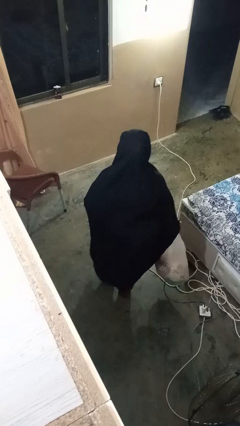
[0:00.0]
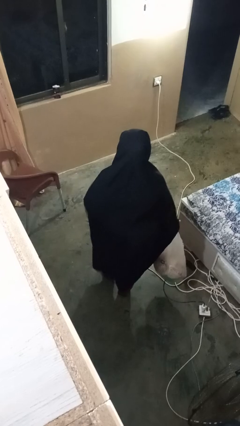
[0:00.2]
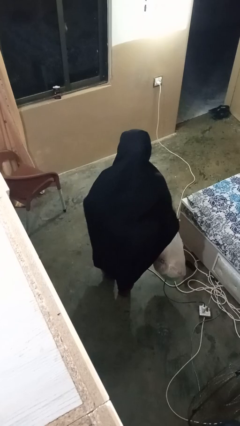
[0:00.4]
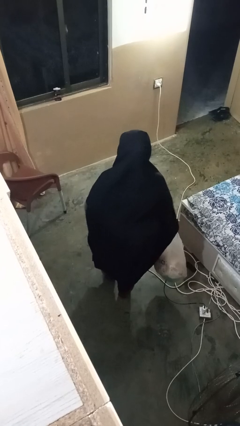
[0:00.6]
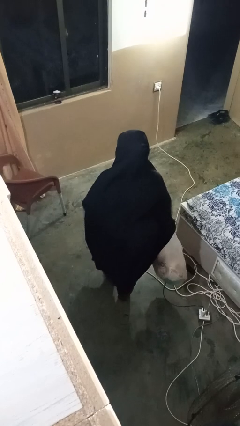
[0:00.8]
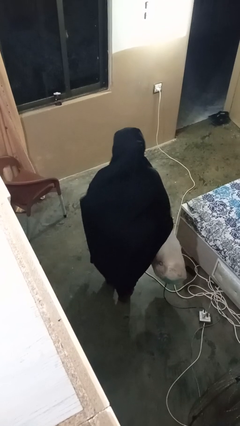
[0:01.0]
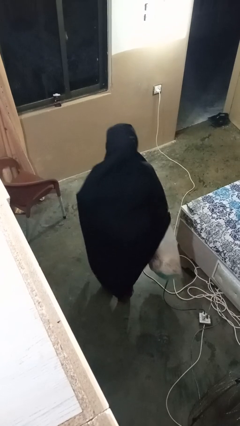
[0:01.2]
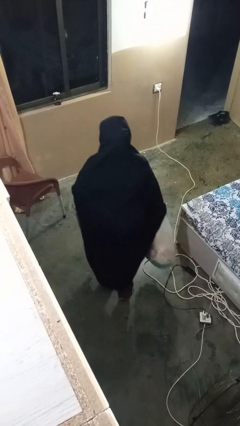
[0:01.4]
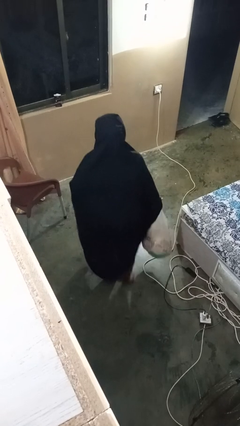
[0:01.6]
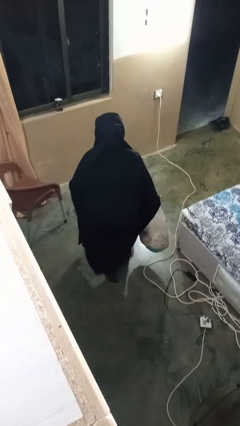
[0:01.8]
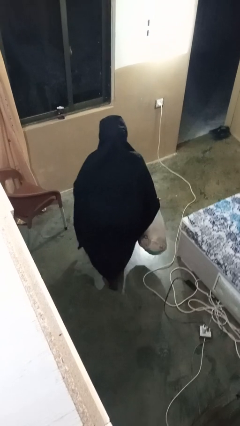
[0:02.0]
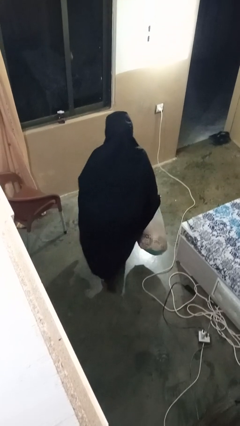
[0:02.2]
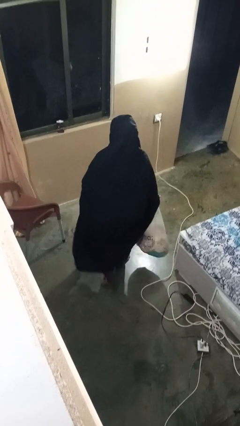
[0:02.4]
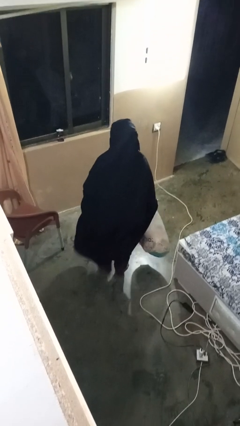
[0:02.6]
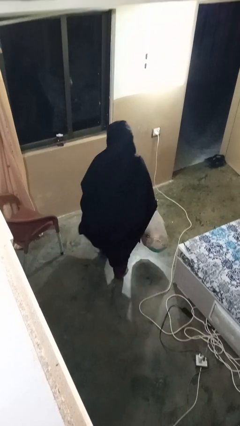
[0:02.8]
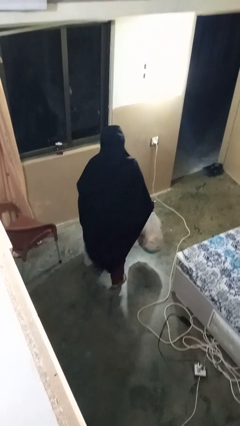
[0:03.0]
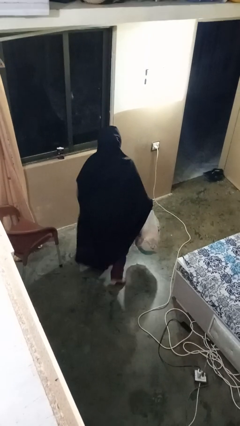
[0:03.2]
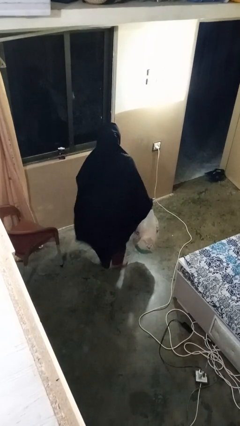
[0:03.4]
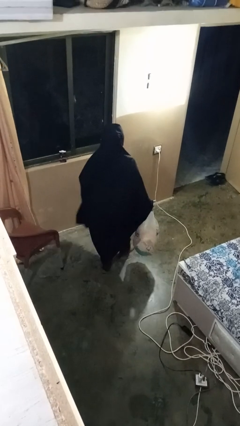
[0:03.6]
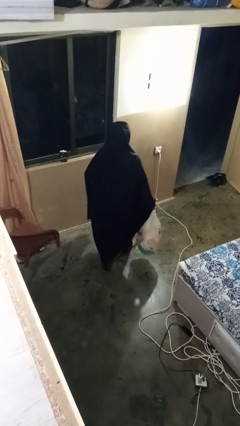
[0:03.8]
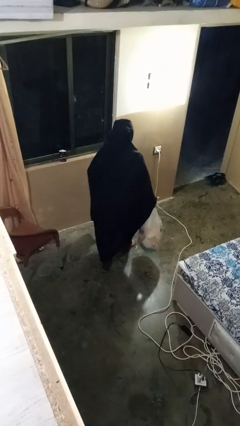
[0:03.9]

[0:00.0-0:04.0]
person carries groceries

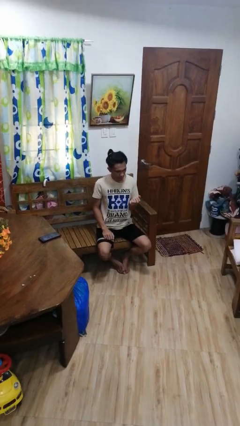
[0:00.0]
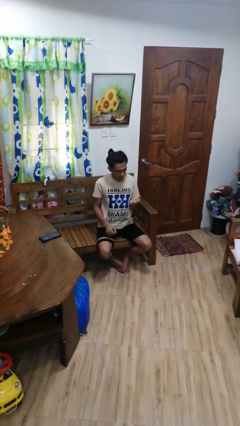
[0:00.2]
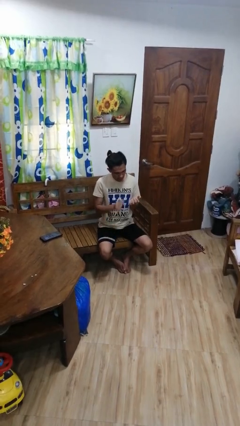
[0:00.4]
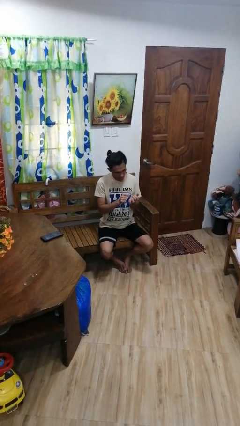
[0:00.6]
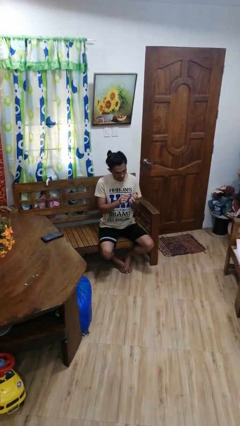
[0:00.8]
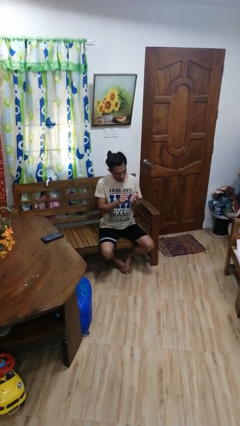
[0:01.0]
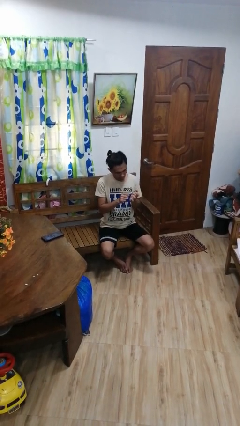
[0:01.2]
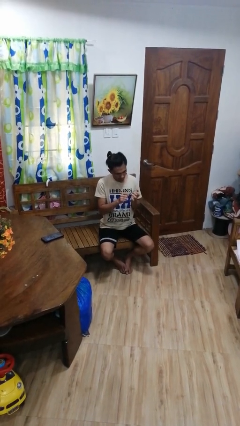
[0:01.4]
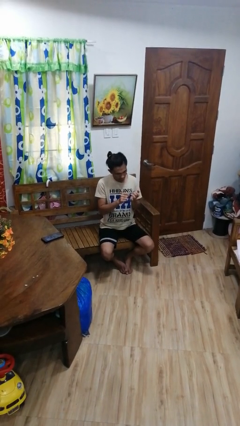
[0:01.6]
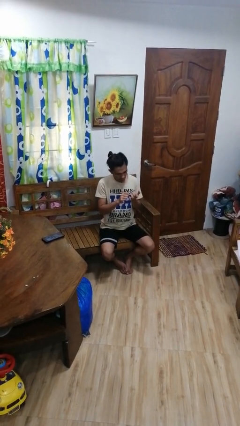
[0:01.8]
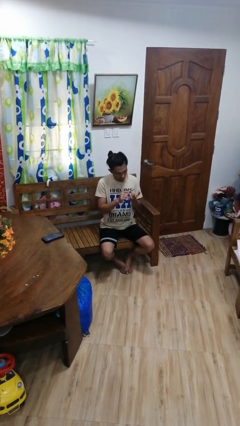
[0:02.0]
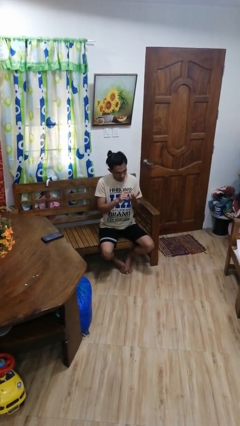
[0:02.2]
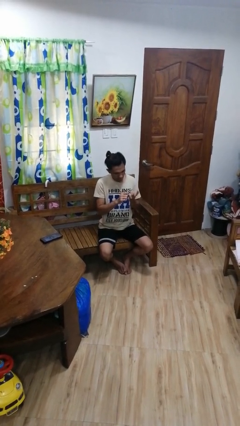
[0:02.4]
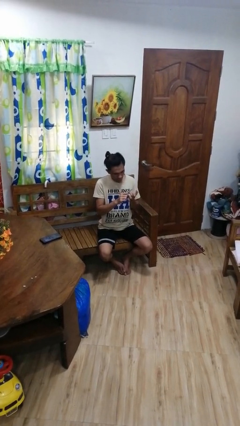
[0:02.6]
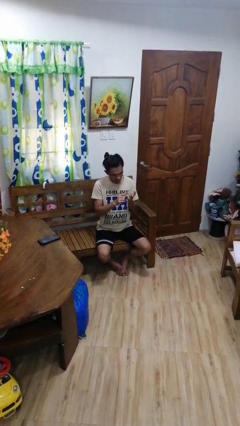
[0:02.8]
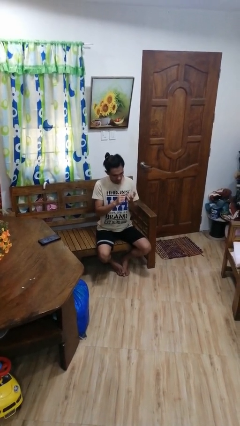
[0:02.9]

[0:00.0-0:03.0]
person files fingernails

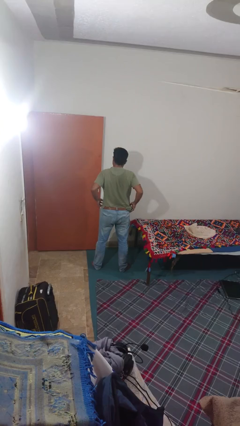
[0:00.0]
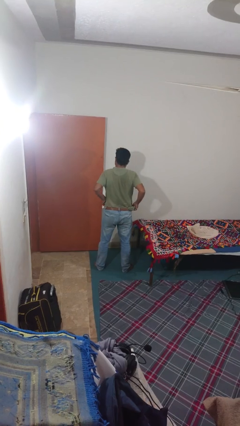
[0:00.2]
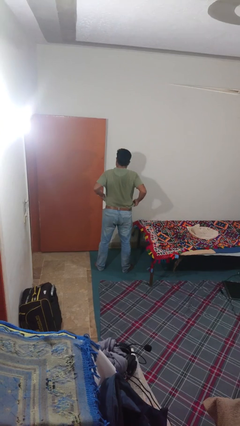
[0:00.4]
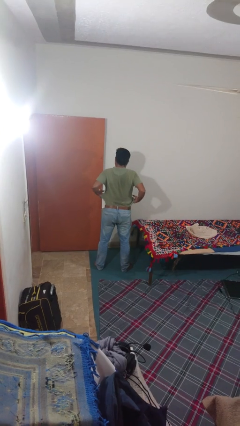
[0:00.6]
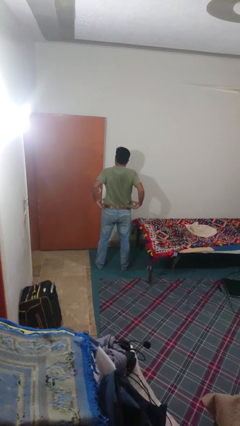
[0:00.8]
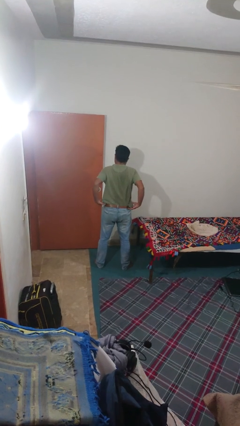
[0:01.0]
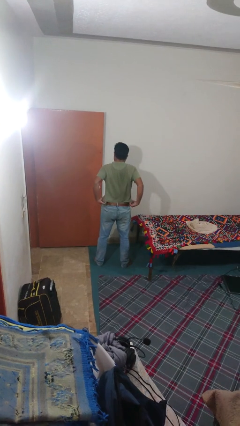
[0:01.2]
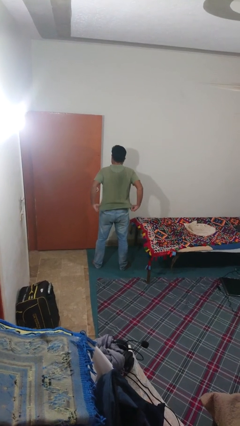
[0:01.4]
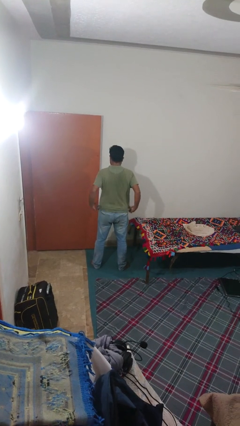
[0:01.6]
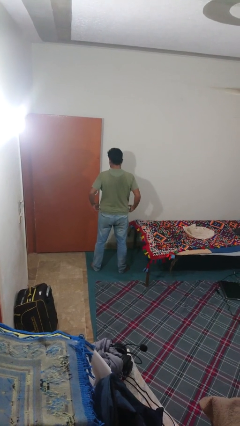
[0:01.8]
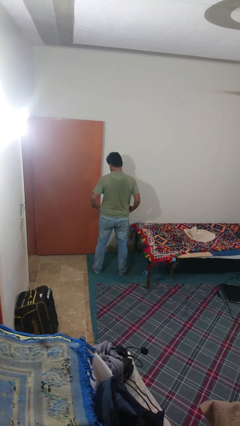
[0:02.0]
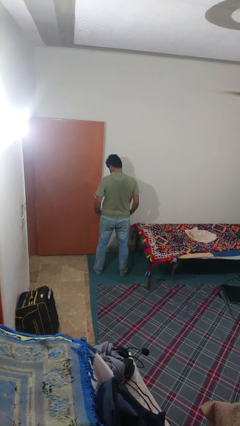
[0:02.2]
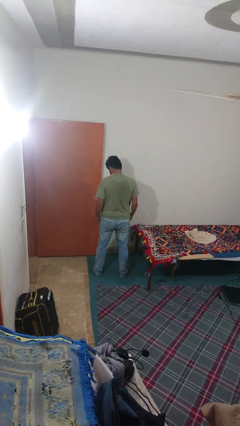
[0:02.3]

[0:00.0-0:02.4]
person untucks shirt

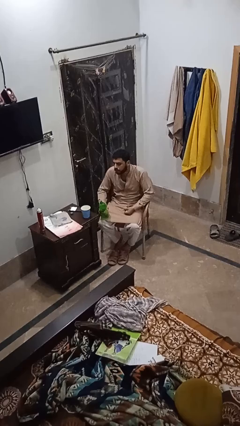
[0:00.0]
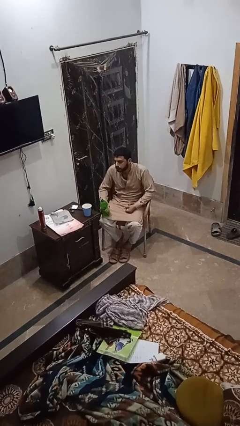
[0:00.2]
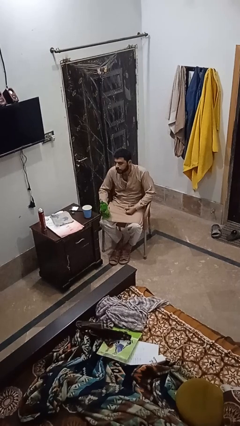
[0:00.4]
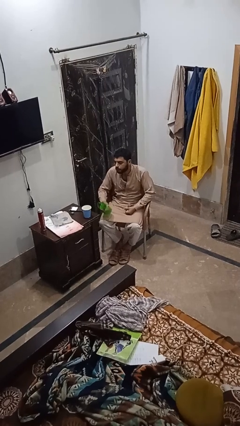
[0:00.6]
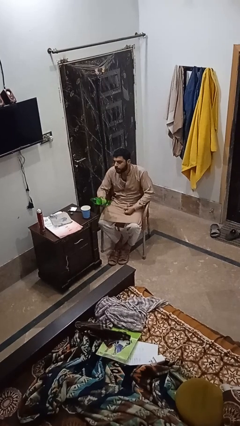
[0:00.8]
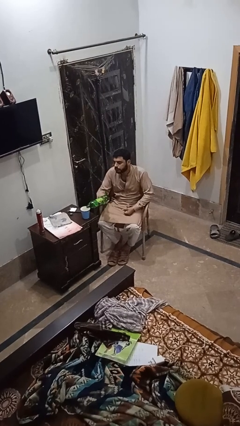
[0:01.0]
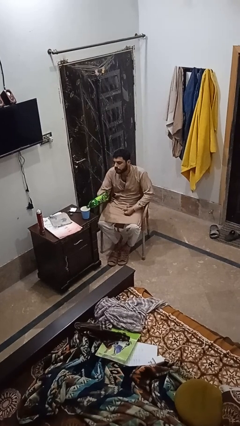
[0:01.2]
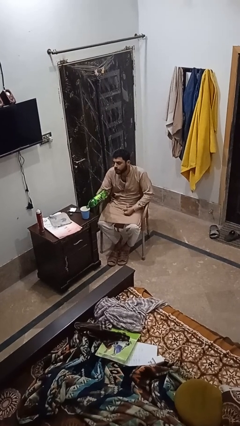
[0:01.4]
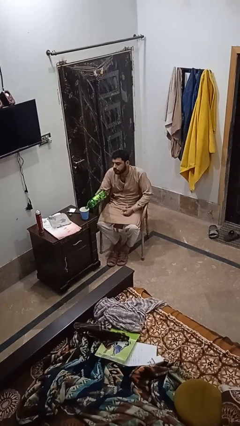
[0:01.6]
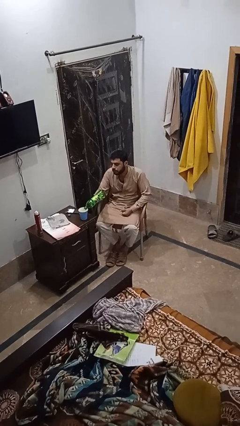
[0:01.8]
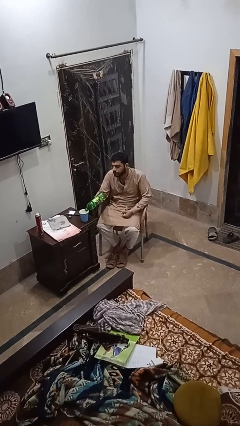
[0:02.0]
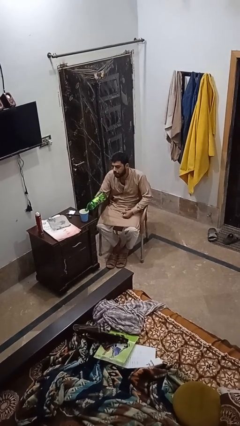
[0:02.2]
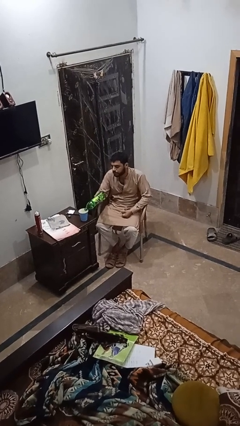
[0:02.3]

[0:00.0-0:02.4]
person pours liquid into cup

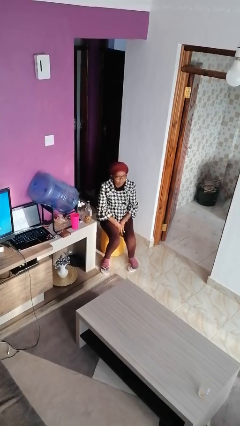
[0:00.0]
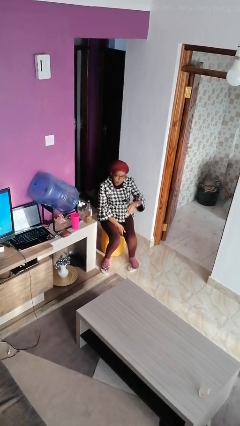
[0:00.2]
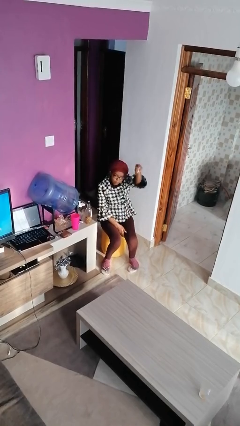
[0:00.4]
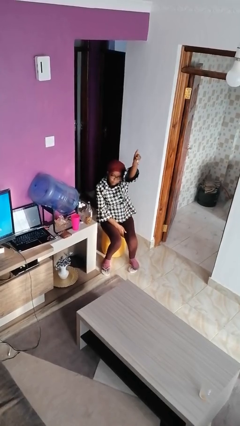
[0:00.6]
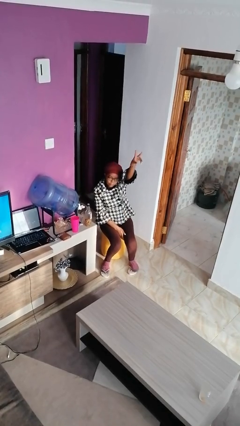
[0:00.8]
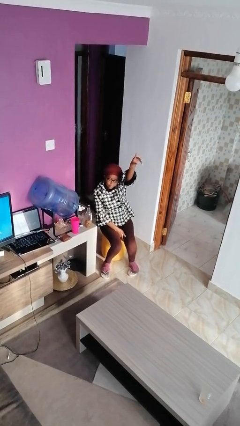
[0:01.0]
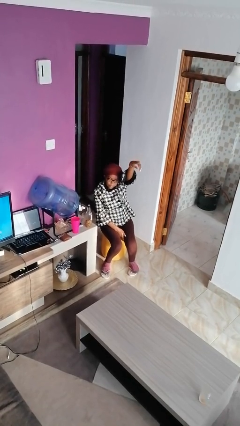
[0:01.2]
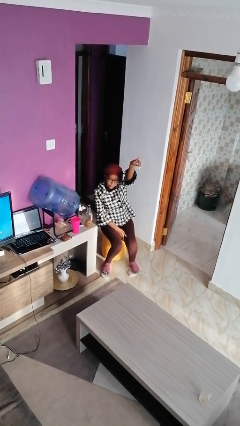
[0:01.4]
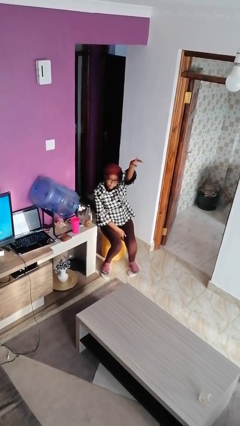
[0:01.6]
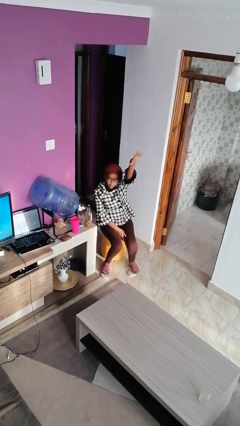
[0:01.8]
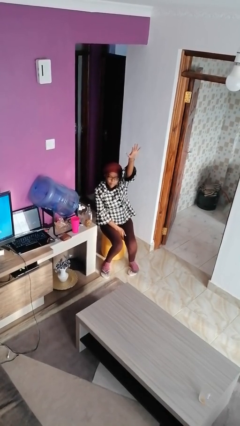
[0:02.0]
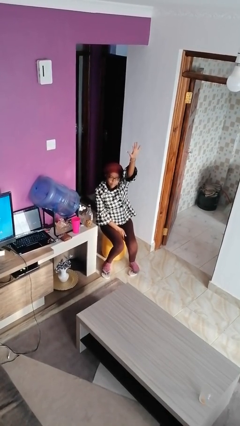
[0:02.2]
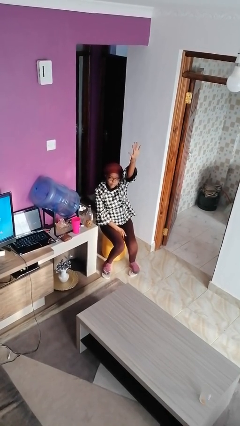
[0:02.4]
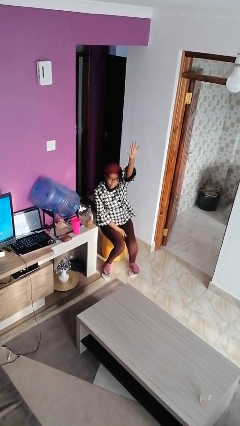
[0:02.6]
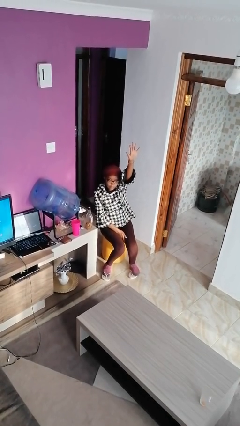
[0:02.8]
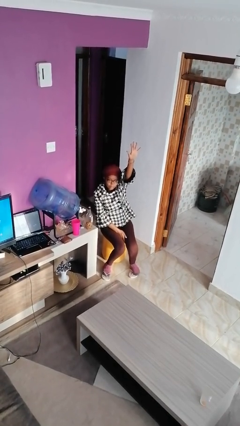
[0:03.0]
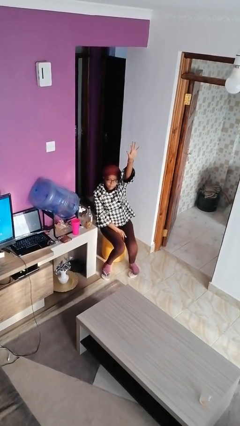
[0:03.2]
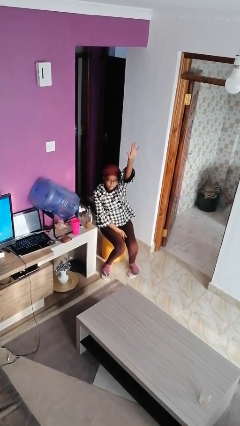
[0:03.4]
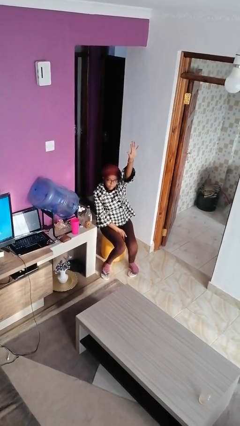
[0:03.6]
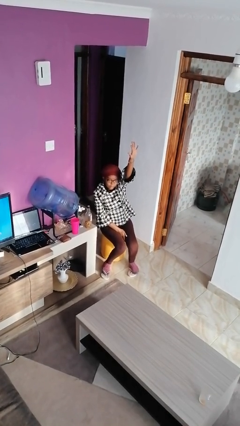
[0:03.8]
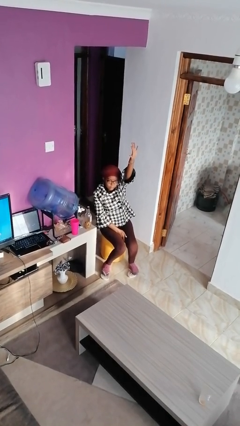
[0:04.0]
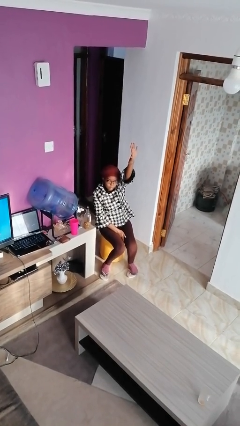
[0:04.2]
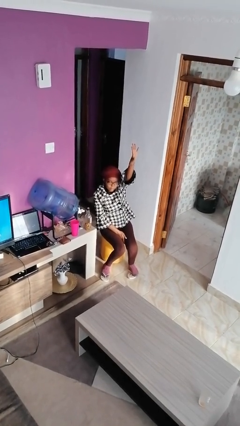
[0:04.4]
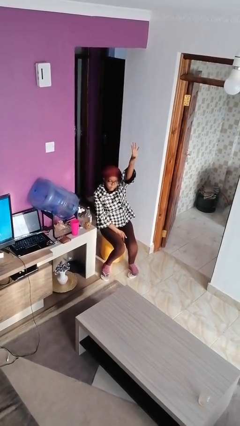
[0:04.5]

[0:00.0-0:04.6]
person gestures raise hand

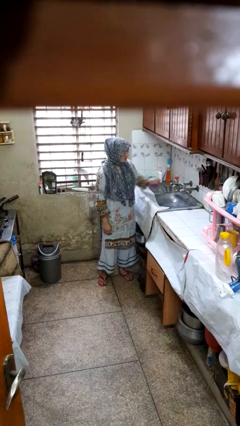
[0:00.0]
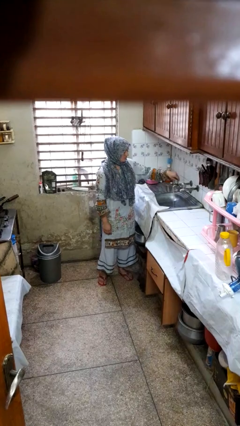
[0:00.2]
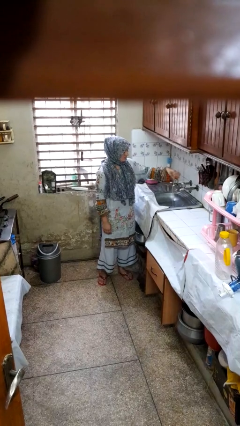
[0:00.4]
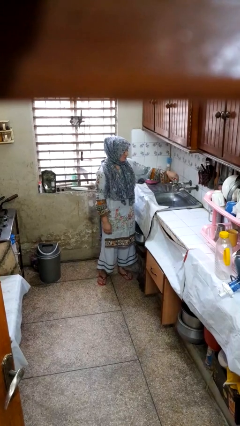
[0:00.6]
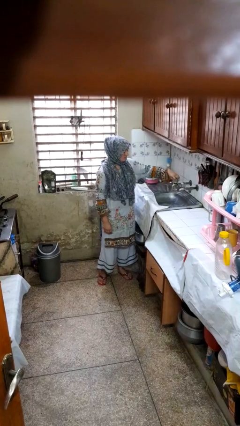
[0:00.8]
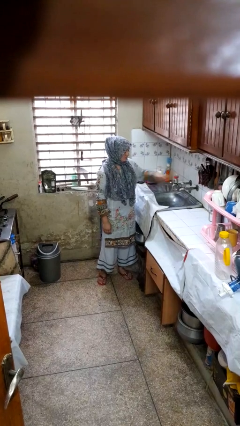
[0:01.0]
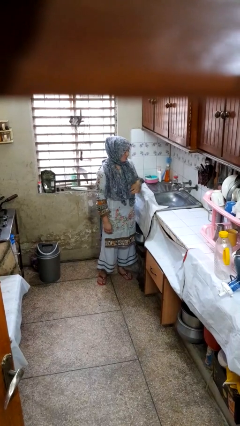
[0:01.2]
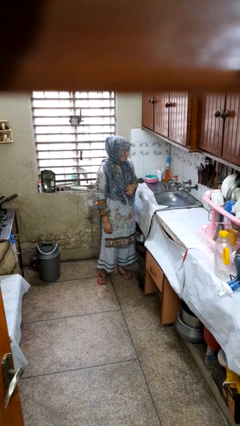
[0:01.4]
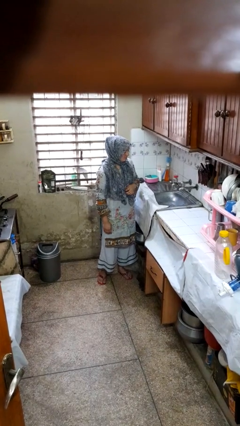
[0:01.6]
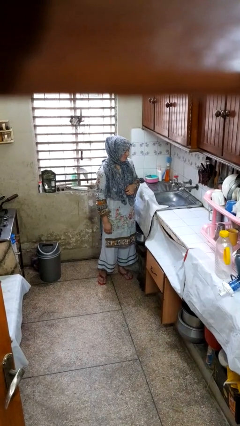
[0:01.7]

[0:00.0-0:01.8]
person turns off faucet
